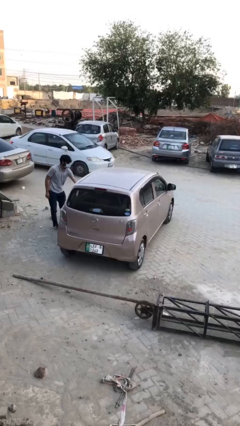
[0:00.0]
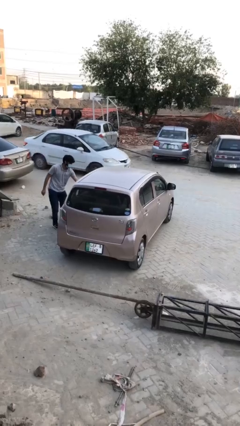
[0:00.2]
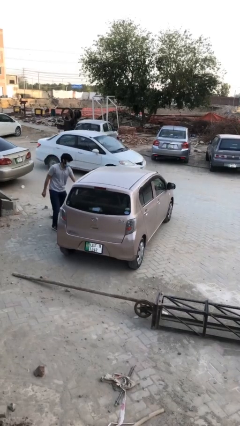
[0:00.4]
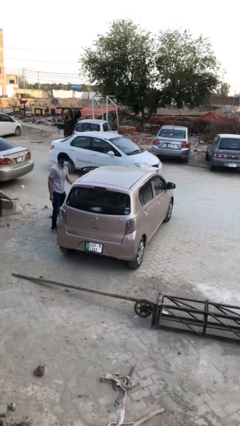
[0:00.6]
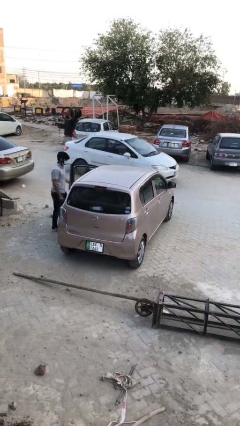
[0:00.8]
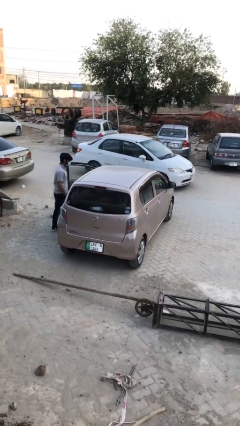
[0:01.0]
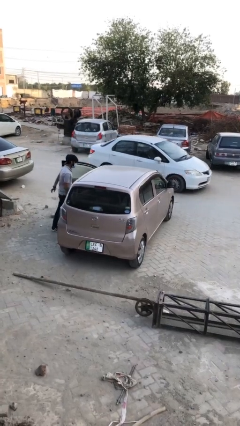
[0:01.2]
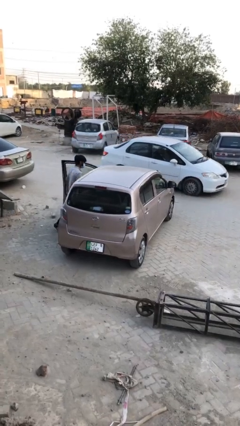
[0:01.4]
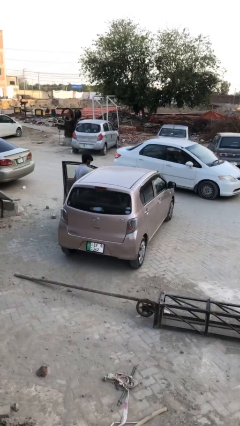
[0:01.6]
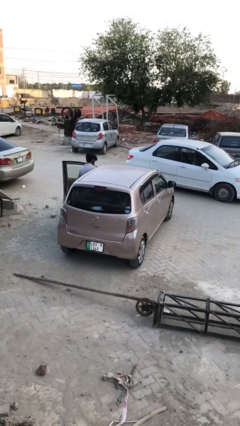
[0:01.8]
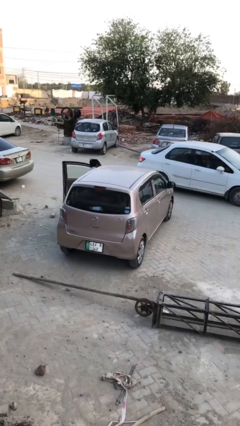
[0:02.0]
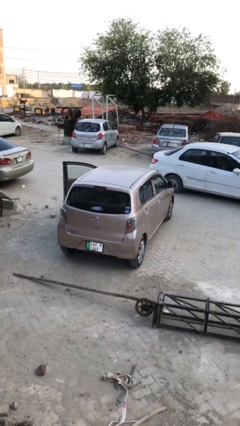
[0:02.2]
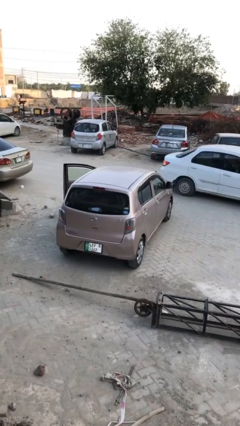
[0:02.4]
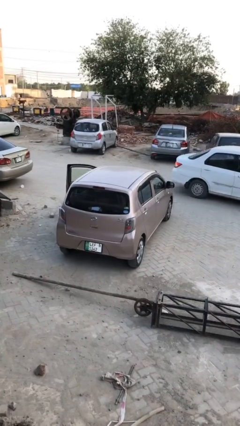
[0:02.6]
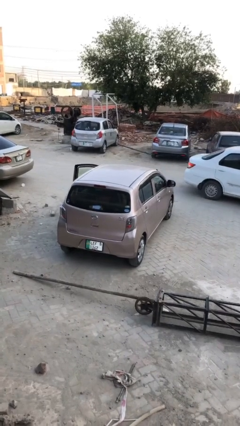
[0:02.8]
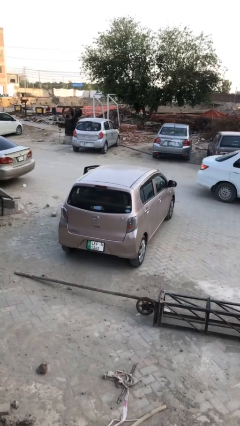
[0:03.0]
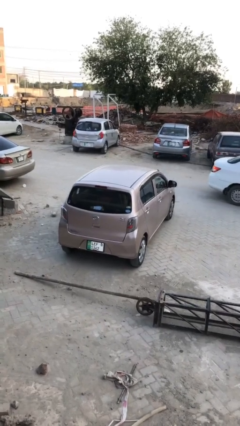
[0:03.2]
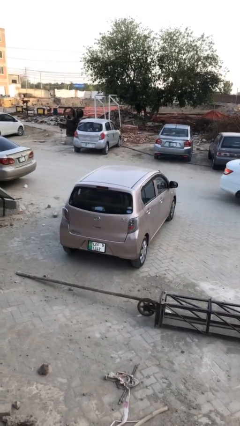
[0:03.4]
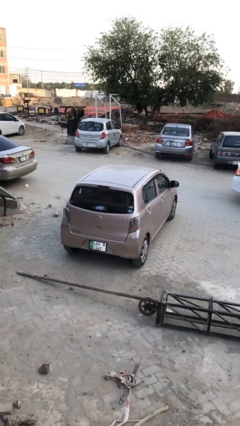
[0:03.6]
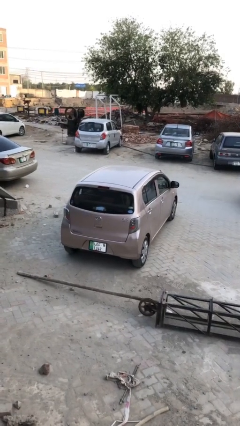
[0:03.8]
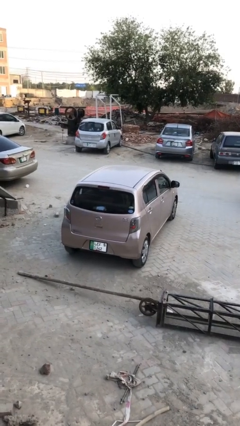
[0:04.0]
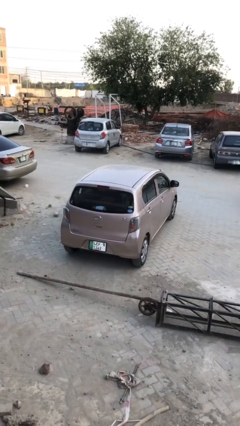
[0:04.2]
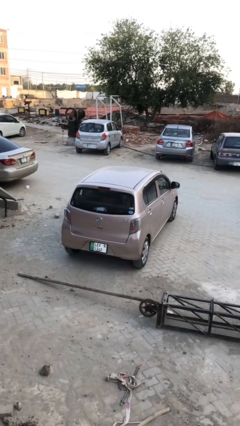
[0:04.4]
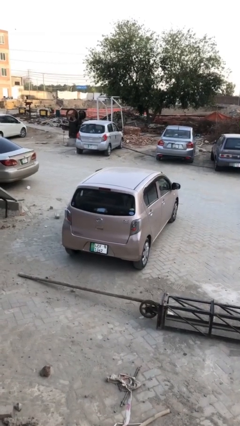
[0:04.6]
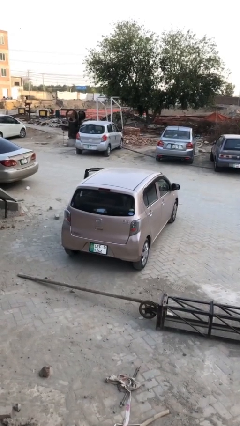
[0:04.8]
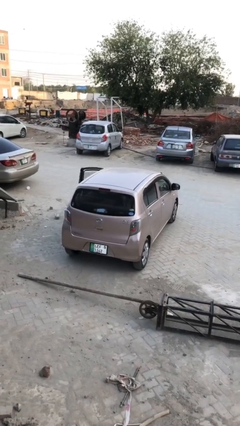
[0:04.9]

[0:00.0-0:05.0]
car picks up person

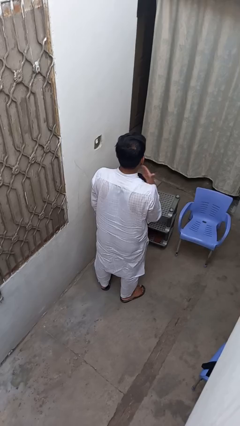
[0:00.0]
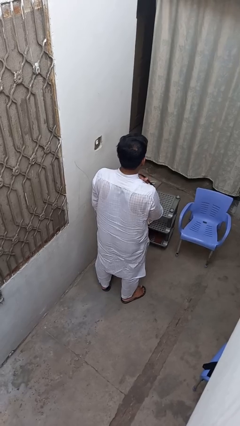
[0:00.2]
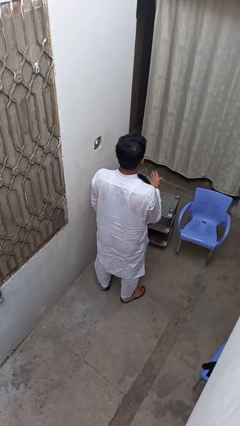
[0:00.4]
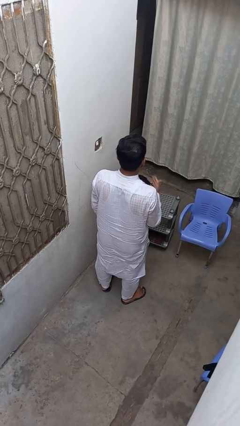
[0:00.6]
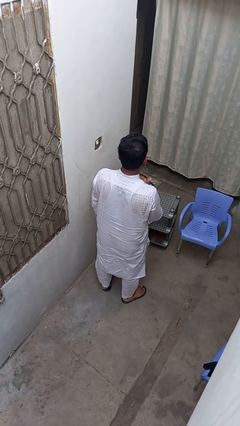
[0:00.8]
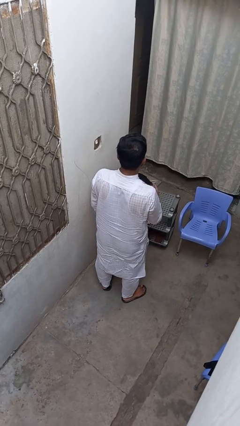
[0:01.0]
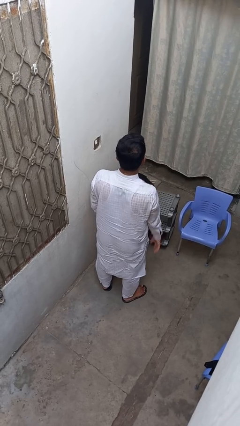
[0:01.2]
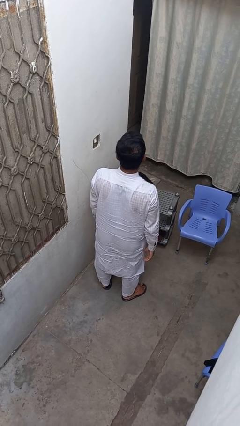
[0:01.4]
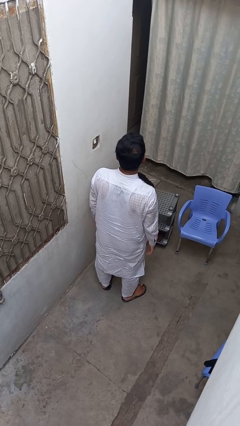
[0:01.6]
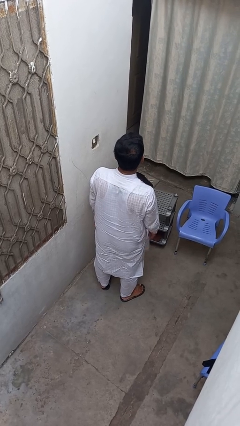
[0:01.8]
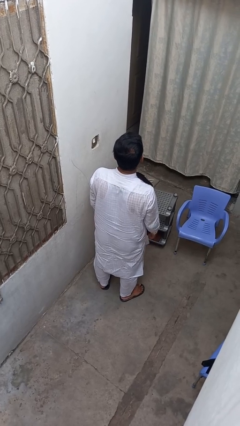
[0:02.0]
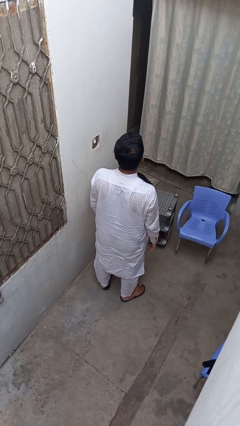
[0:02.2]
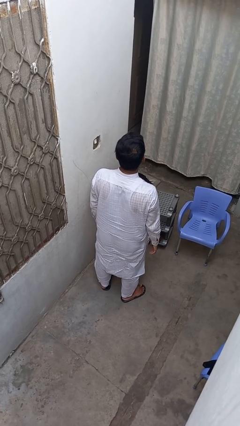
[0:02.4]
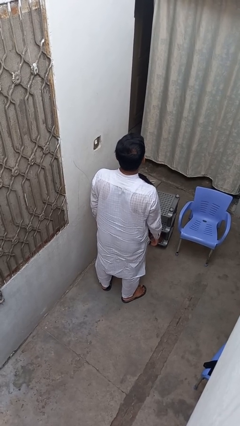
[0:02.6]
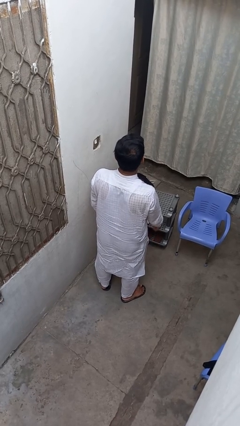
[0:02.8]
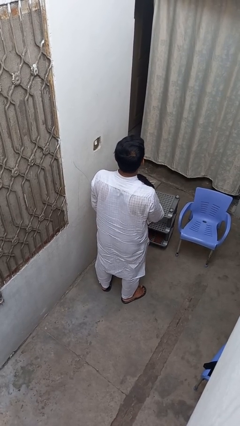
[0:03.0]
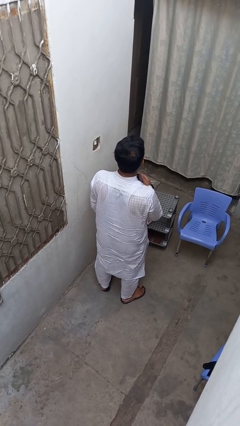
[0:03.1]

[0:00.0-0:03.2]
person drums on chest

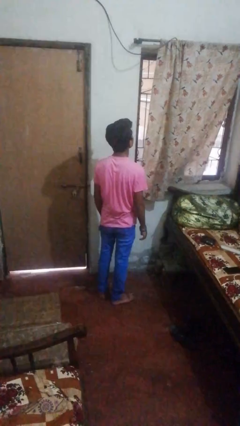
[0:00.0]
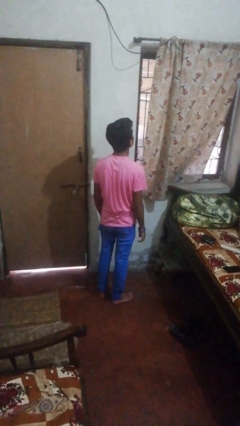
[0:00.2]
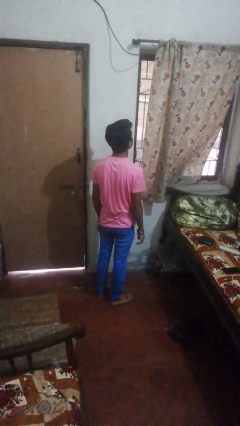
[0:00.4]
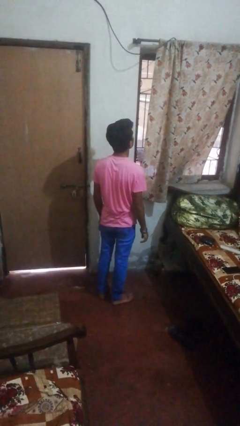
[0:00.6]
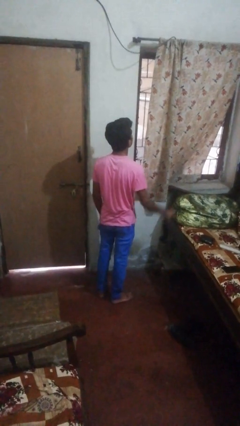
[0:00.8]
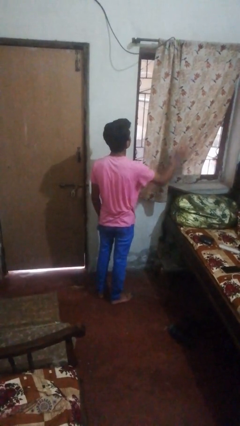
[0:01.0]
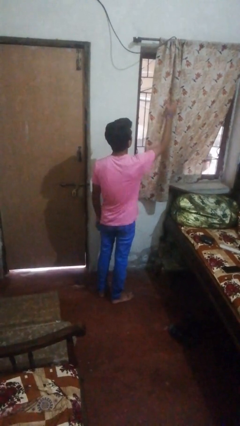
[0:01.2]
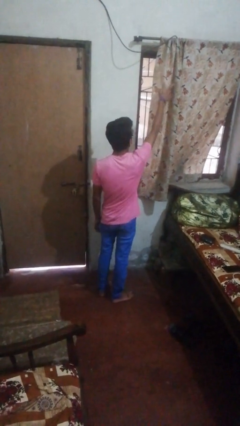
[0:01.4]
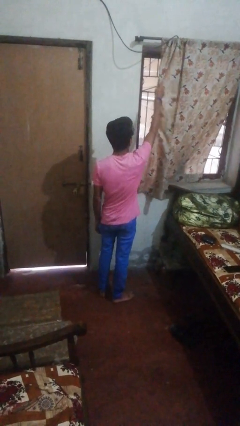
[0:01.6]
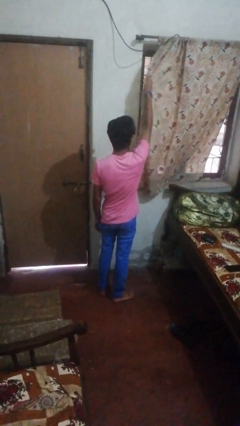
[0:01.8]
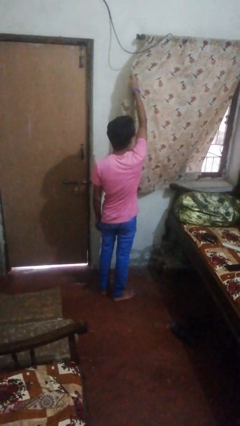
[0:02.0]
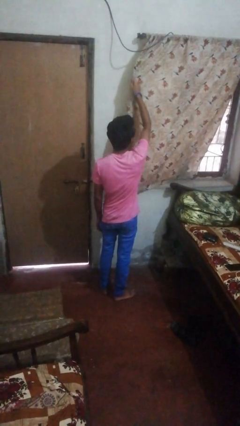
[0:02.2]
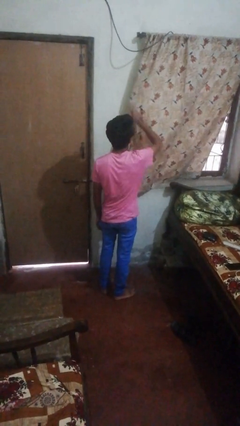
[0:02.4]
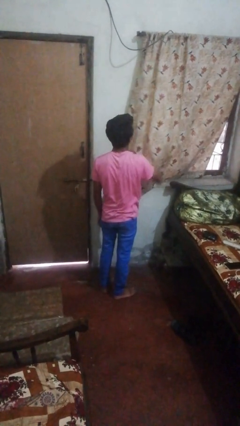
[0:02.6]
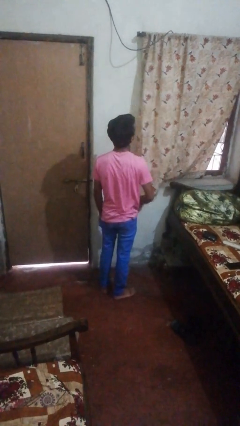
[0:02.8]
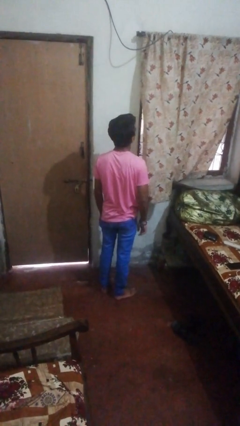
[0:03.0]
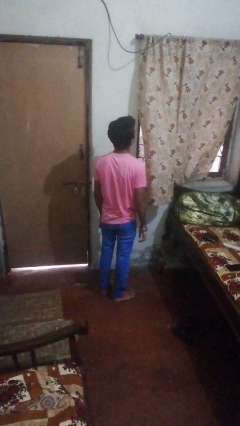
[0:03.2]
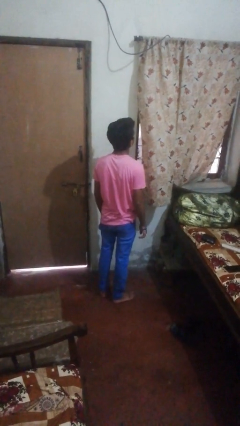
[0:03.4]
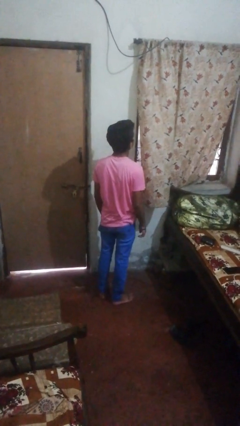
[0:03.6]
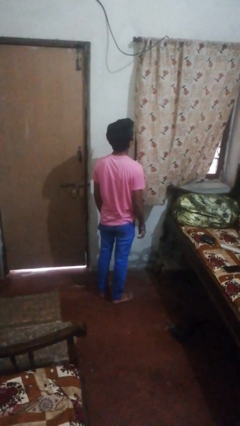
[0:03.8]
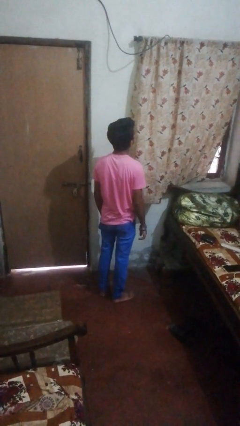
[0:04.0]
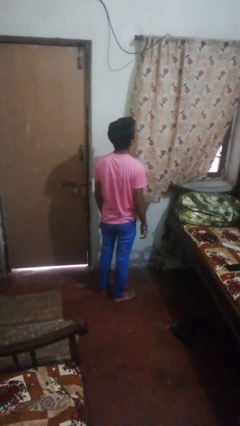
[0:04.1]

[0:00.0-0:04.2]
person closes curtains

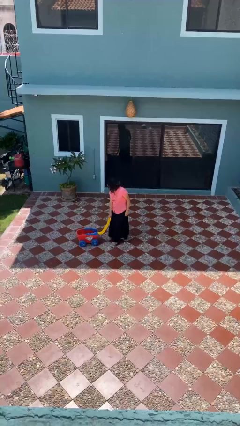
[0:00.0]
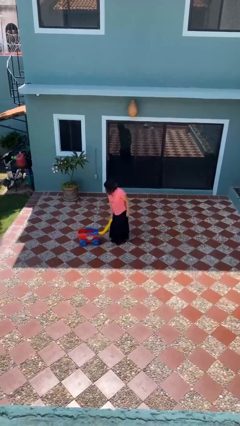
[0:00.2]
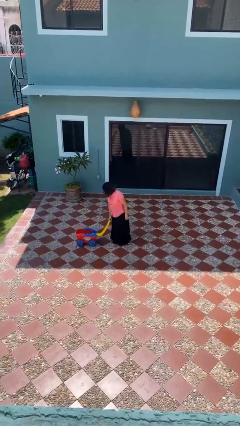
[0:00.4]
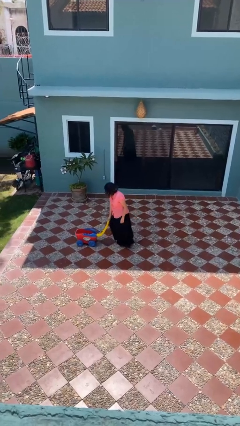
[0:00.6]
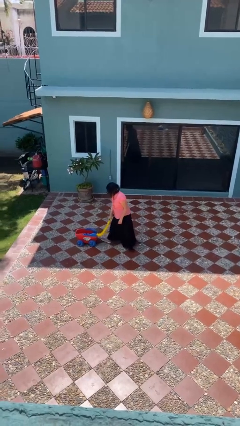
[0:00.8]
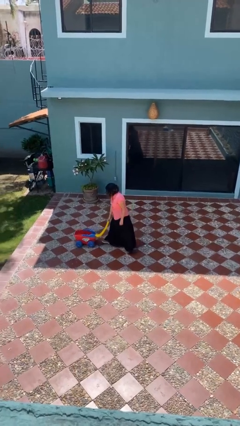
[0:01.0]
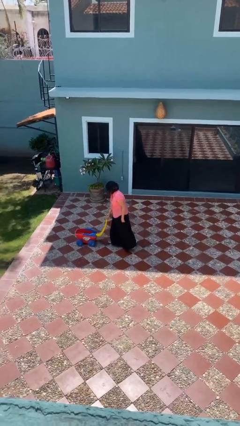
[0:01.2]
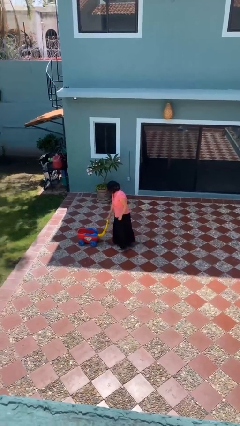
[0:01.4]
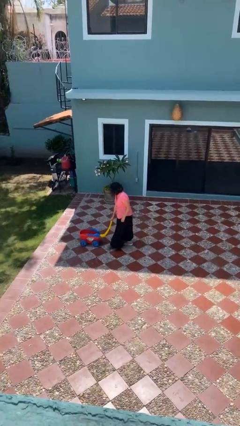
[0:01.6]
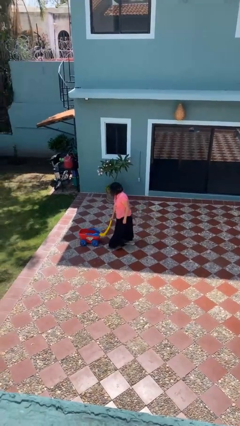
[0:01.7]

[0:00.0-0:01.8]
person pushes wheeled cart

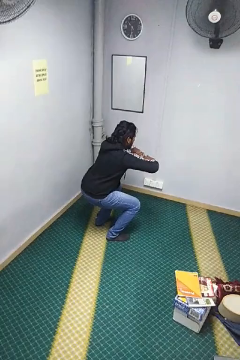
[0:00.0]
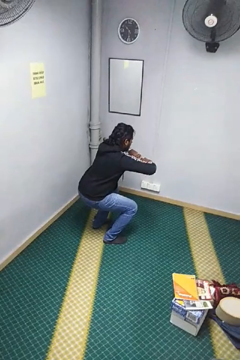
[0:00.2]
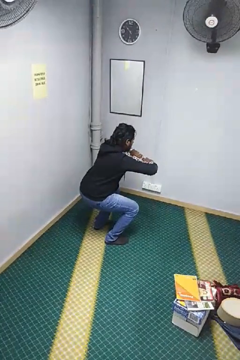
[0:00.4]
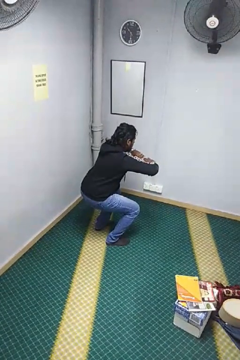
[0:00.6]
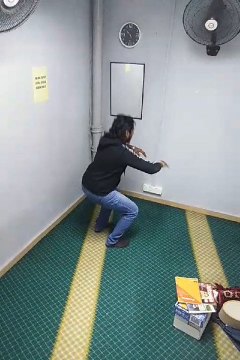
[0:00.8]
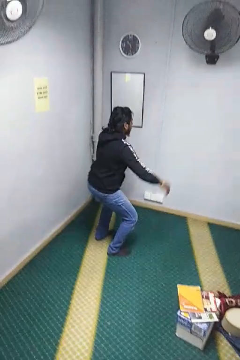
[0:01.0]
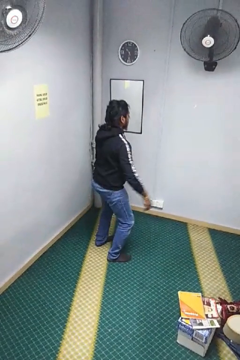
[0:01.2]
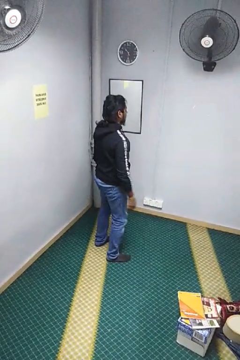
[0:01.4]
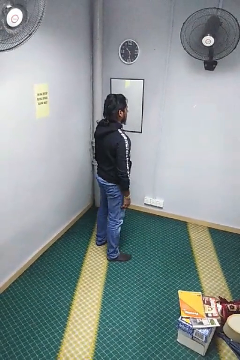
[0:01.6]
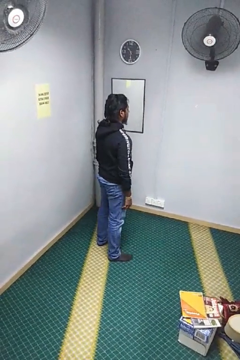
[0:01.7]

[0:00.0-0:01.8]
person stands up

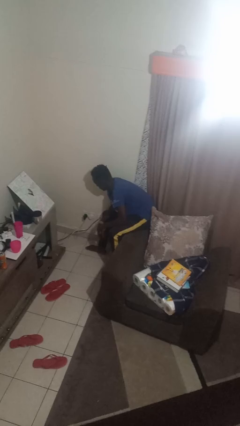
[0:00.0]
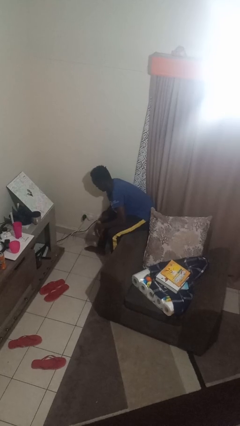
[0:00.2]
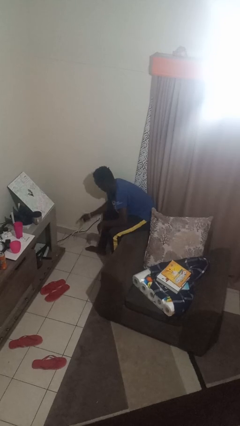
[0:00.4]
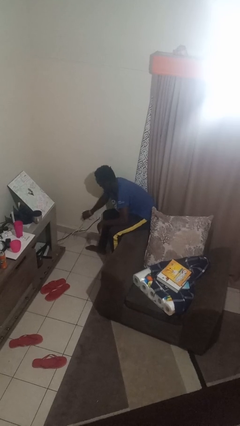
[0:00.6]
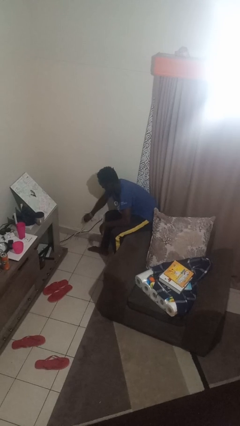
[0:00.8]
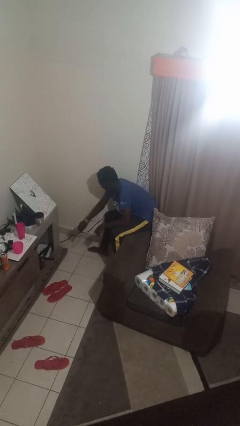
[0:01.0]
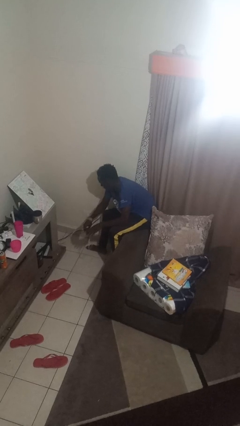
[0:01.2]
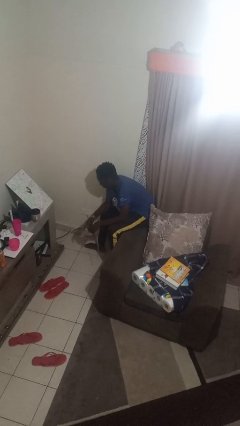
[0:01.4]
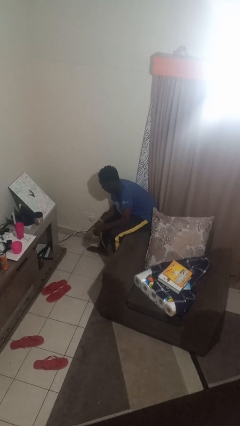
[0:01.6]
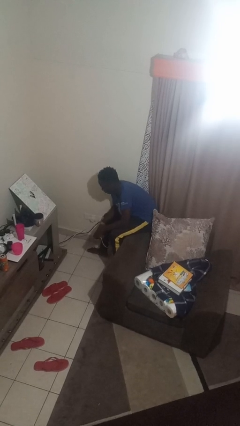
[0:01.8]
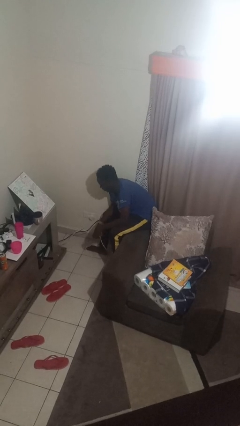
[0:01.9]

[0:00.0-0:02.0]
person unplugs from electrical socket
